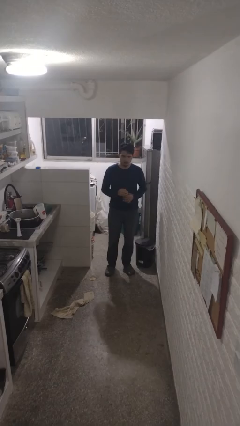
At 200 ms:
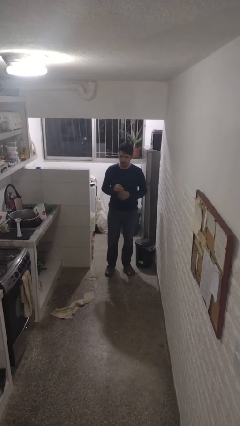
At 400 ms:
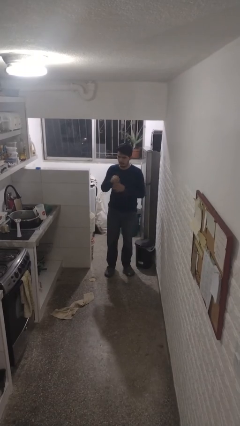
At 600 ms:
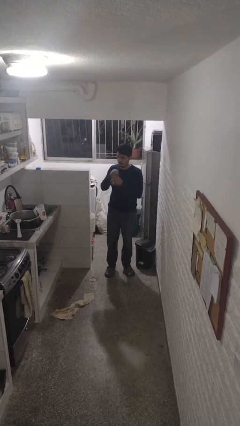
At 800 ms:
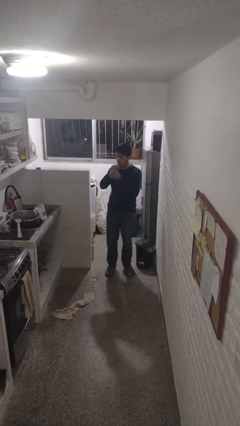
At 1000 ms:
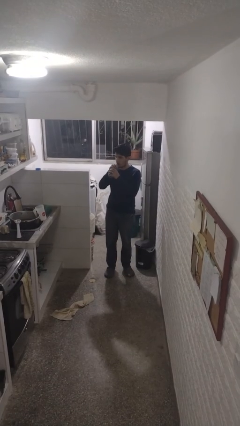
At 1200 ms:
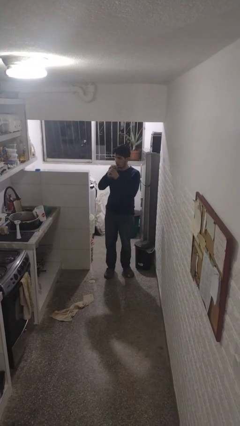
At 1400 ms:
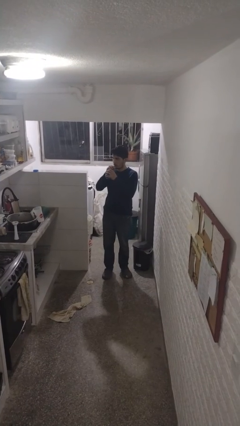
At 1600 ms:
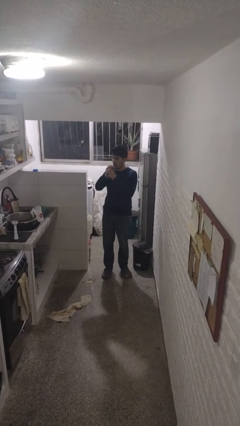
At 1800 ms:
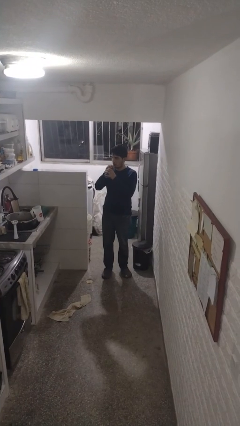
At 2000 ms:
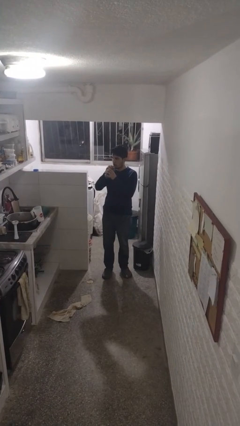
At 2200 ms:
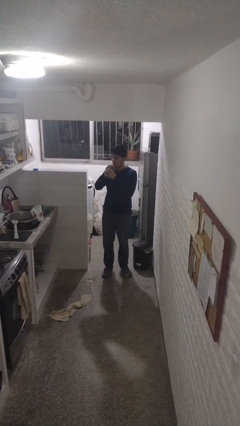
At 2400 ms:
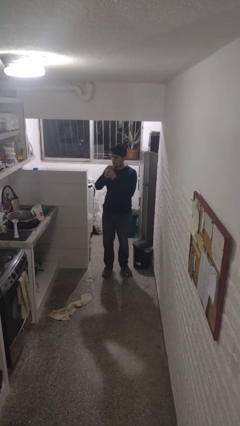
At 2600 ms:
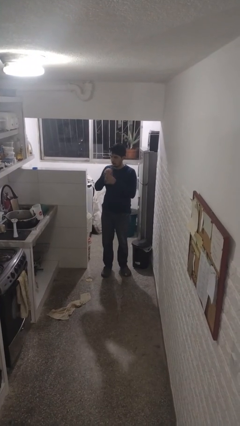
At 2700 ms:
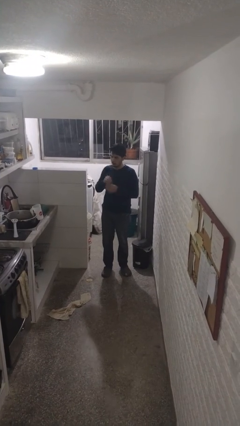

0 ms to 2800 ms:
person drinks from straw

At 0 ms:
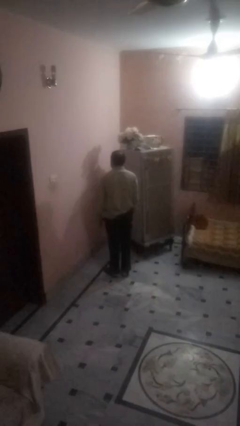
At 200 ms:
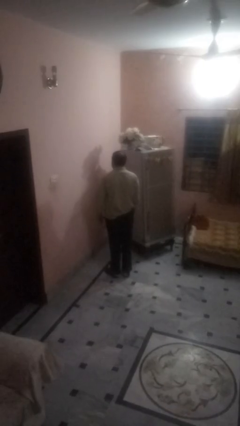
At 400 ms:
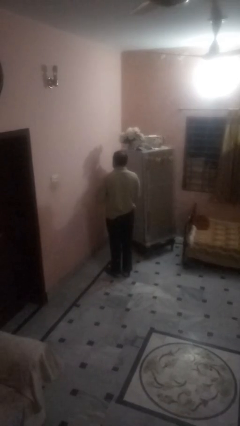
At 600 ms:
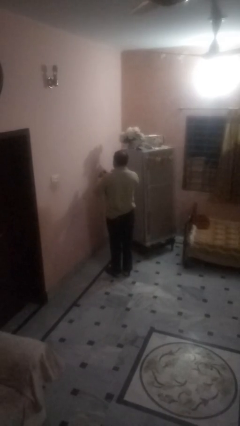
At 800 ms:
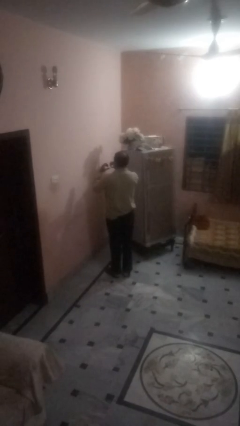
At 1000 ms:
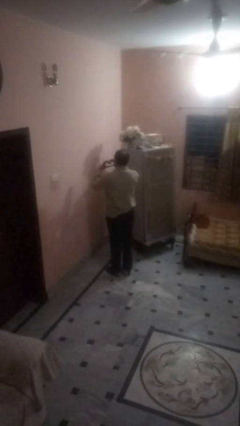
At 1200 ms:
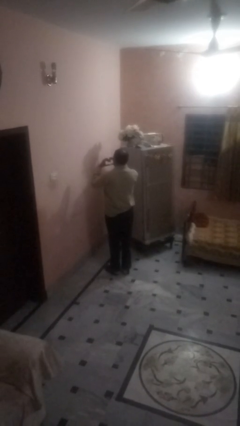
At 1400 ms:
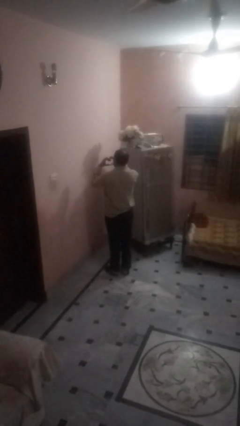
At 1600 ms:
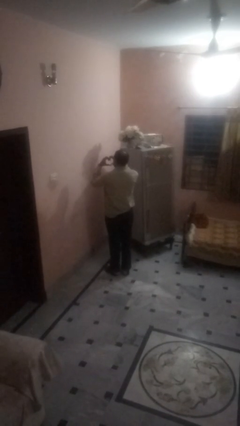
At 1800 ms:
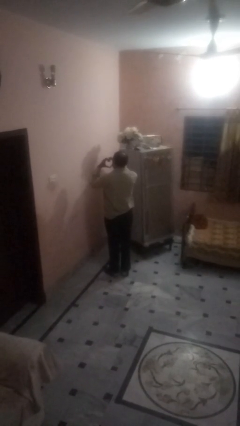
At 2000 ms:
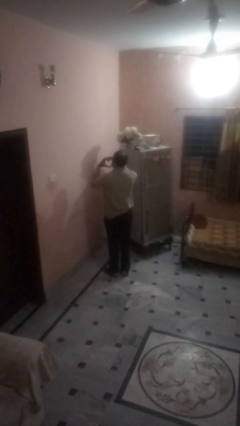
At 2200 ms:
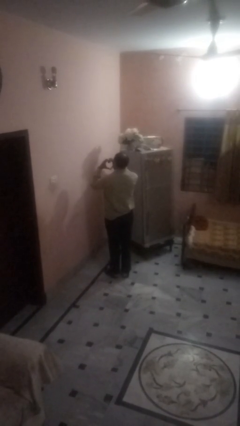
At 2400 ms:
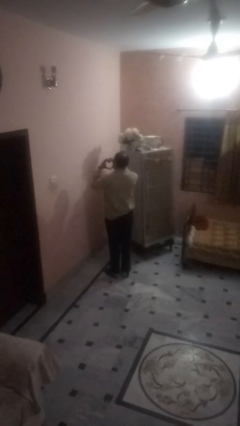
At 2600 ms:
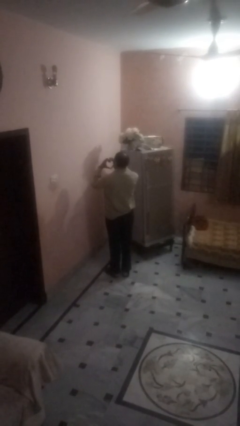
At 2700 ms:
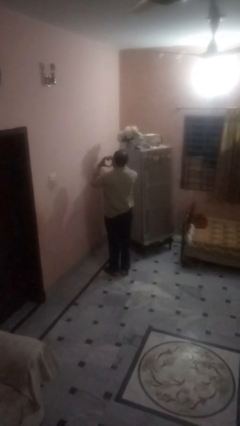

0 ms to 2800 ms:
person gestures heart

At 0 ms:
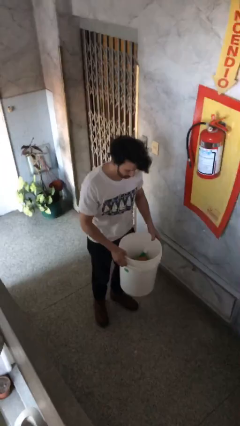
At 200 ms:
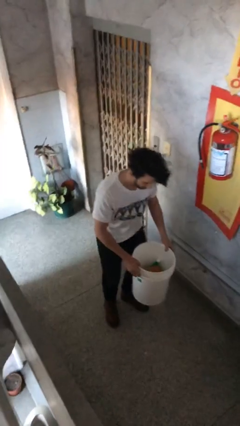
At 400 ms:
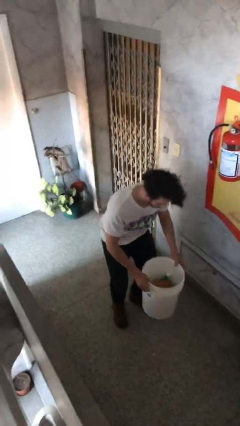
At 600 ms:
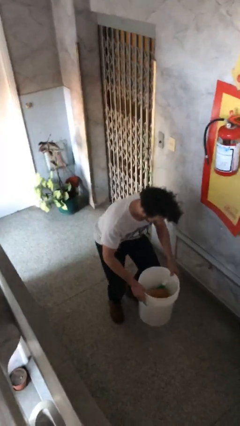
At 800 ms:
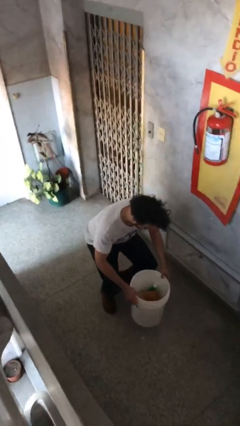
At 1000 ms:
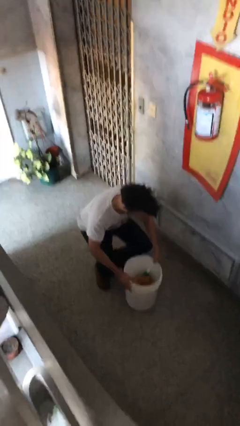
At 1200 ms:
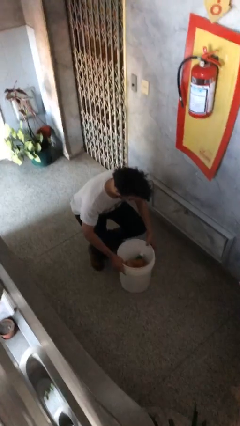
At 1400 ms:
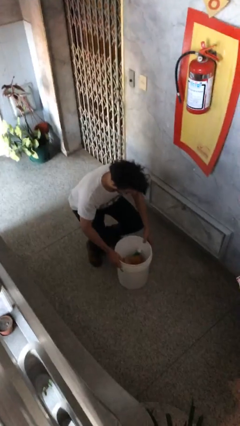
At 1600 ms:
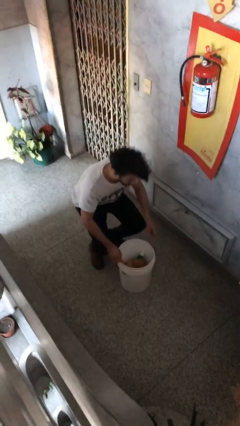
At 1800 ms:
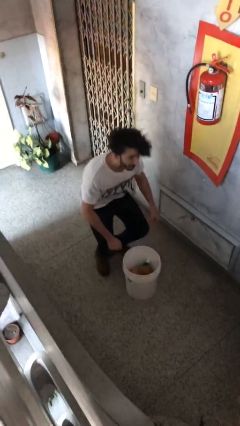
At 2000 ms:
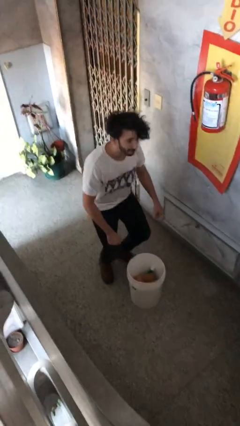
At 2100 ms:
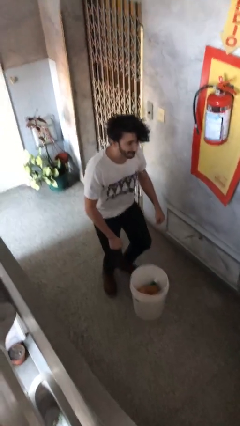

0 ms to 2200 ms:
person puts down object on floor

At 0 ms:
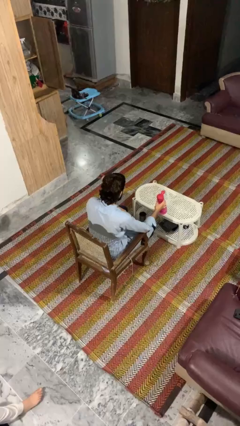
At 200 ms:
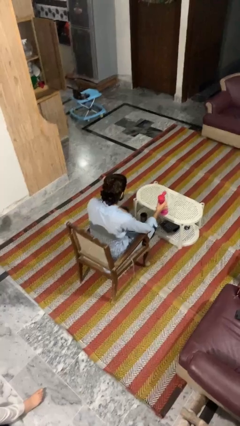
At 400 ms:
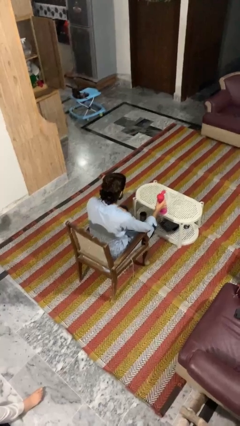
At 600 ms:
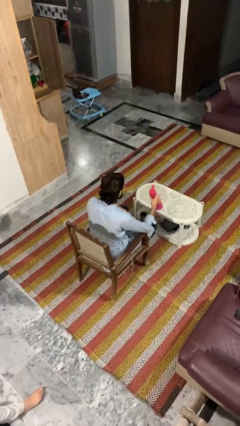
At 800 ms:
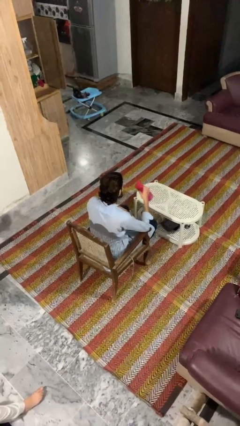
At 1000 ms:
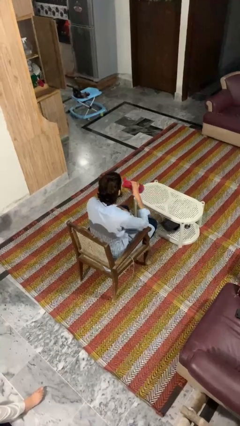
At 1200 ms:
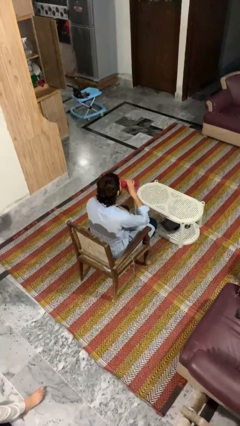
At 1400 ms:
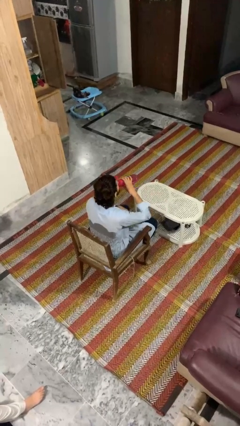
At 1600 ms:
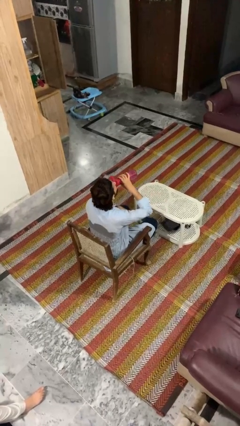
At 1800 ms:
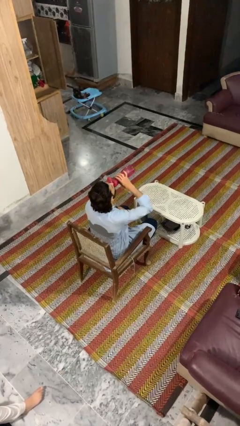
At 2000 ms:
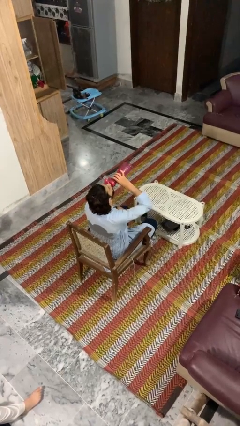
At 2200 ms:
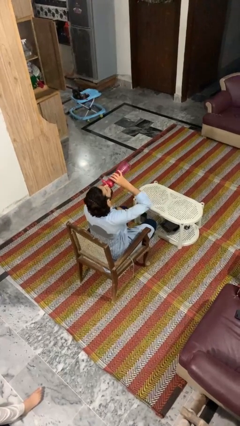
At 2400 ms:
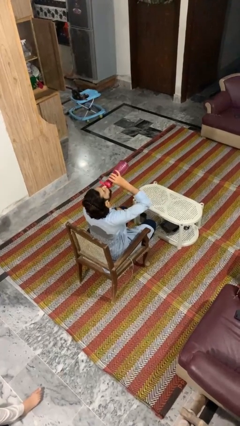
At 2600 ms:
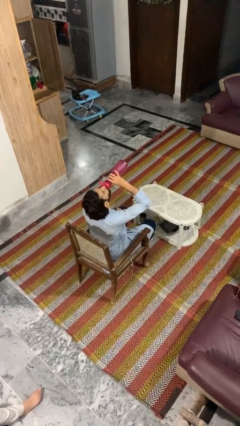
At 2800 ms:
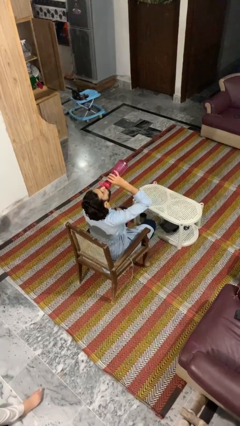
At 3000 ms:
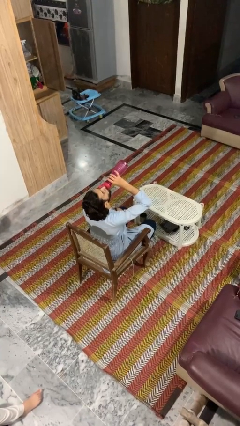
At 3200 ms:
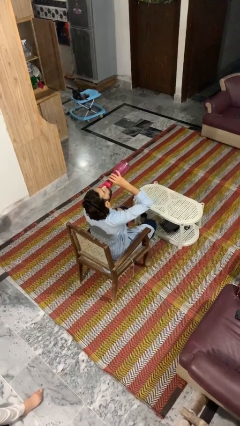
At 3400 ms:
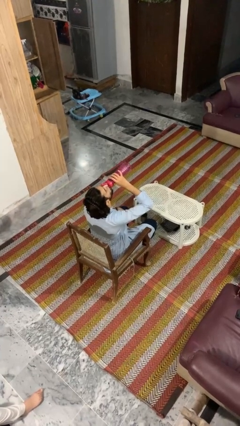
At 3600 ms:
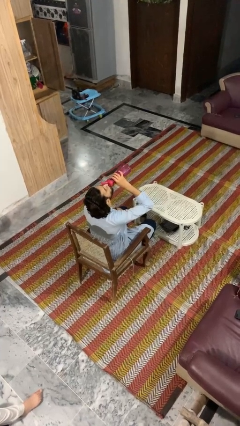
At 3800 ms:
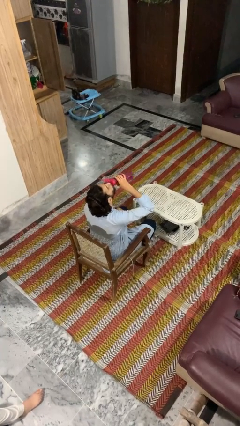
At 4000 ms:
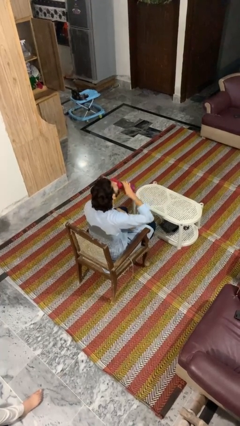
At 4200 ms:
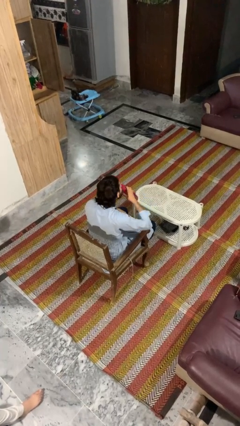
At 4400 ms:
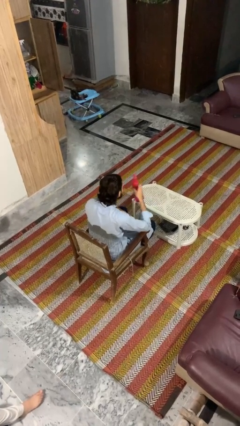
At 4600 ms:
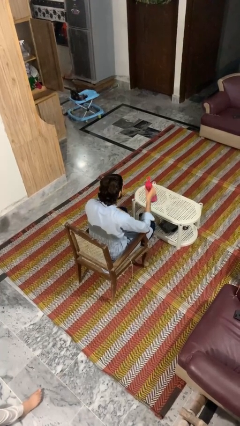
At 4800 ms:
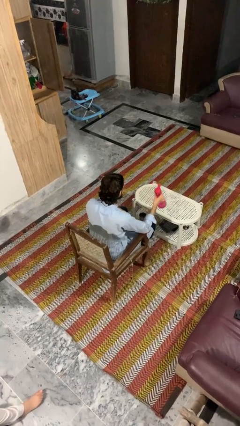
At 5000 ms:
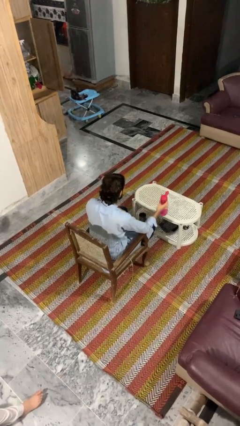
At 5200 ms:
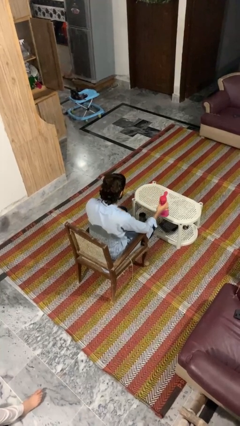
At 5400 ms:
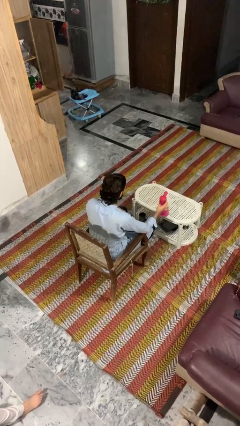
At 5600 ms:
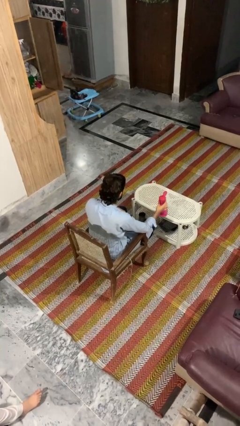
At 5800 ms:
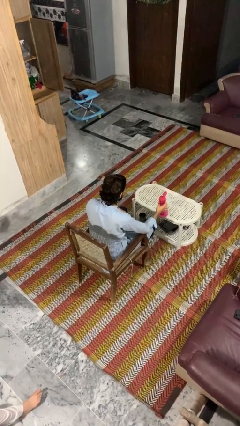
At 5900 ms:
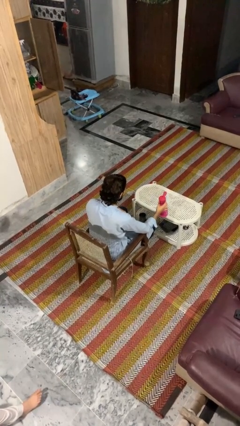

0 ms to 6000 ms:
person drinks from bottle

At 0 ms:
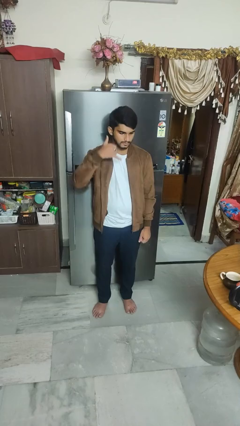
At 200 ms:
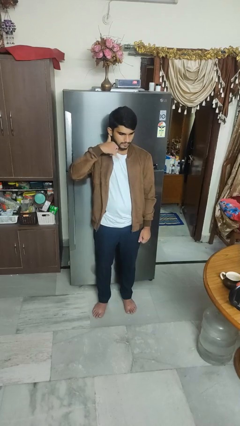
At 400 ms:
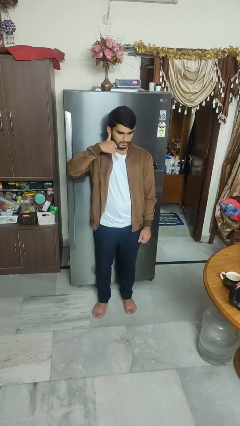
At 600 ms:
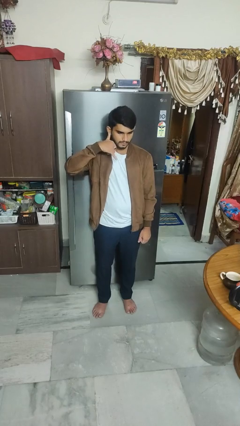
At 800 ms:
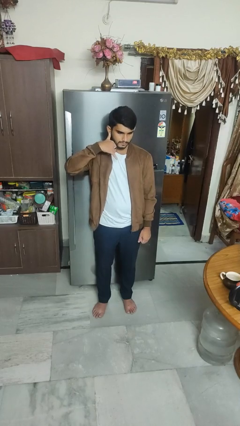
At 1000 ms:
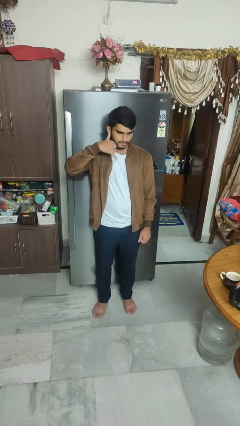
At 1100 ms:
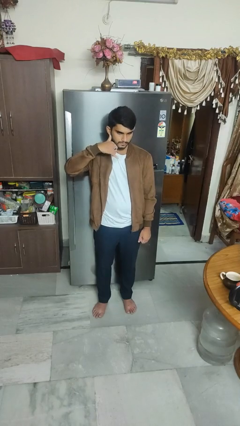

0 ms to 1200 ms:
person gestures call me

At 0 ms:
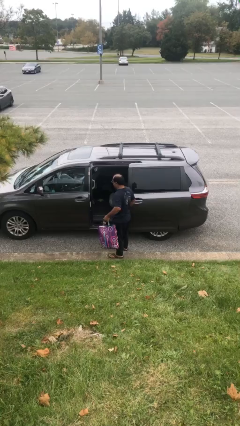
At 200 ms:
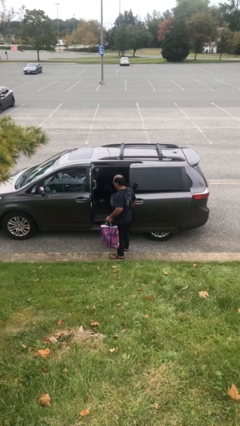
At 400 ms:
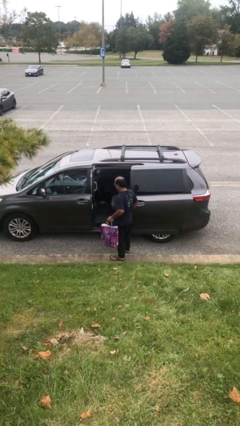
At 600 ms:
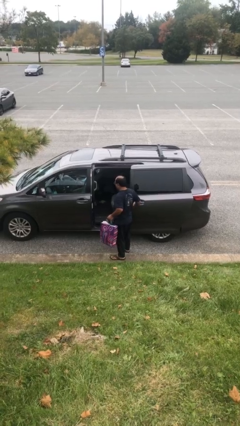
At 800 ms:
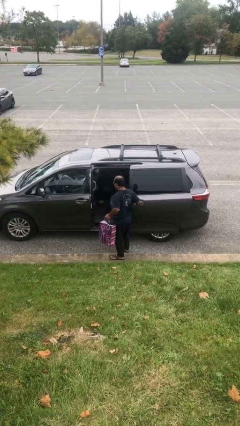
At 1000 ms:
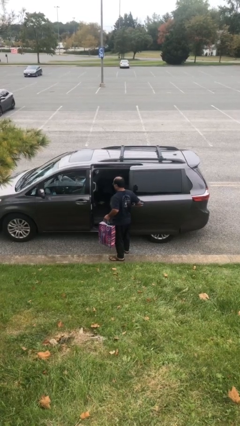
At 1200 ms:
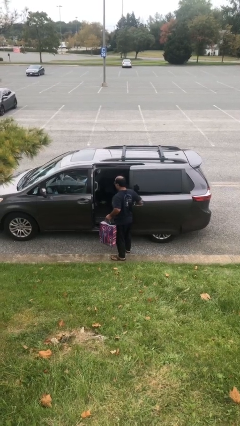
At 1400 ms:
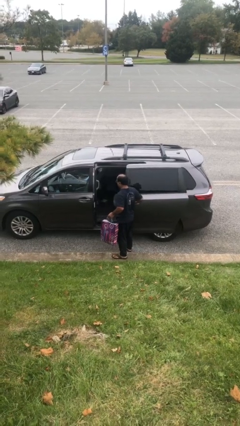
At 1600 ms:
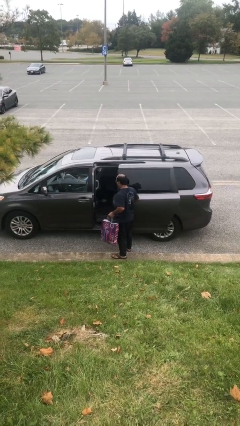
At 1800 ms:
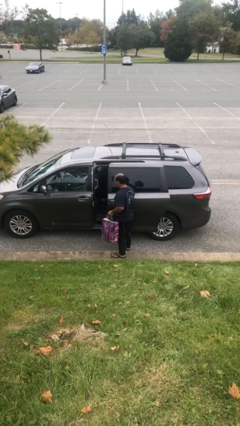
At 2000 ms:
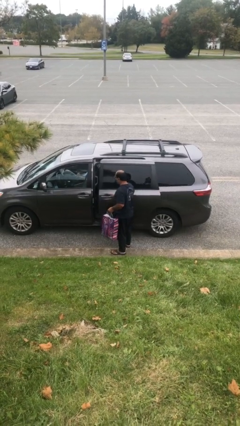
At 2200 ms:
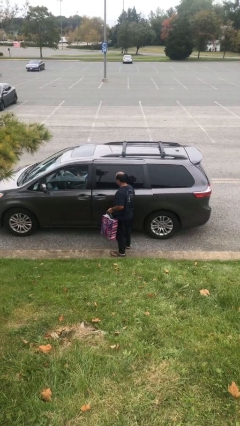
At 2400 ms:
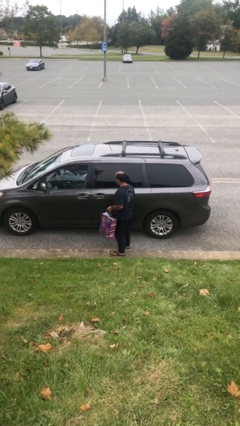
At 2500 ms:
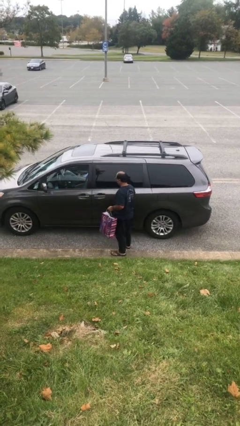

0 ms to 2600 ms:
person closes car door
